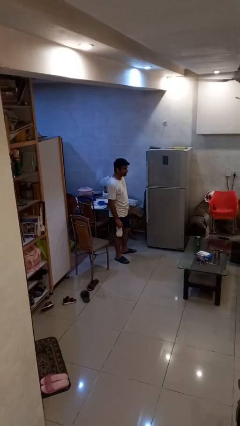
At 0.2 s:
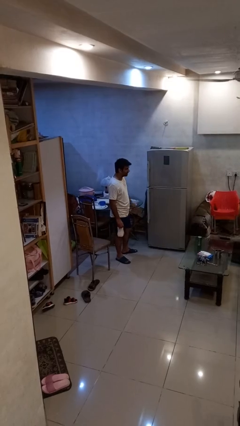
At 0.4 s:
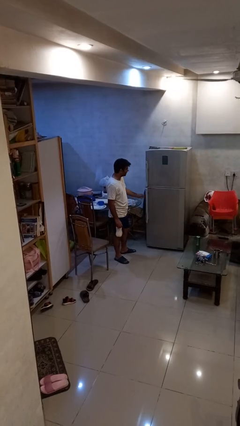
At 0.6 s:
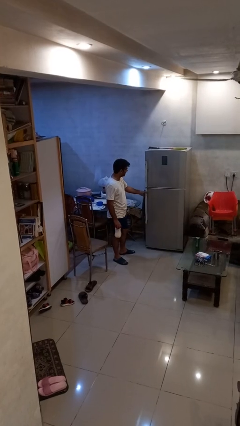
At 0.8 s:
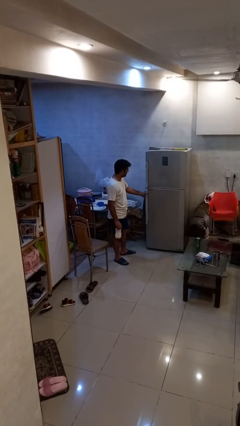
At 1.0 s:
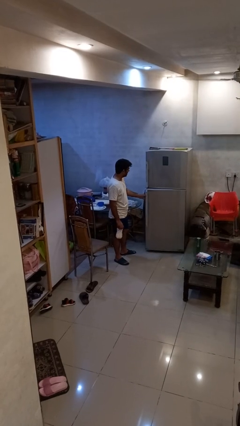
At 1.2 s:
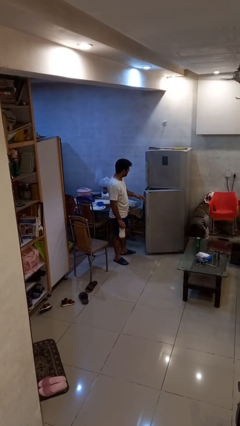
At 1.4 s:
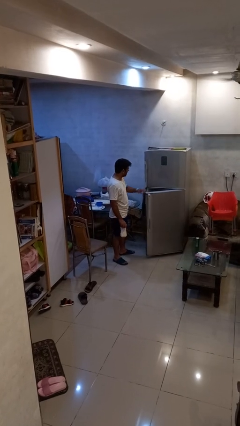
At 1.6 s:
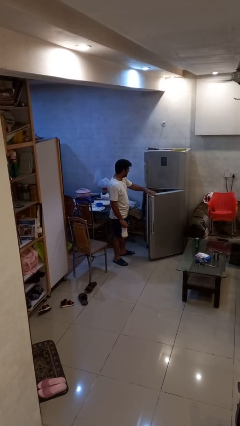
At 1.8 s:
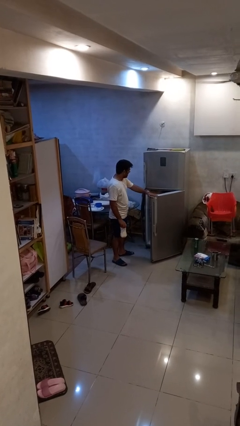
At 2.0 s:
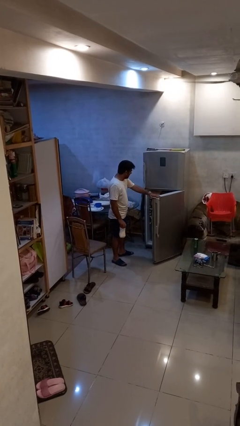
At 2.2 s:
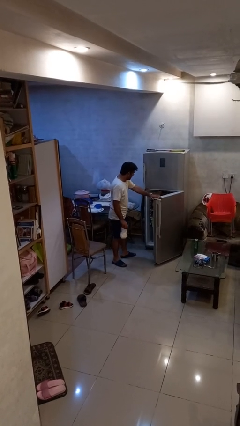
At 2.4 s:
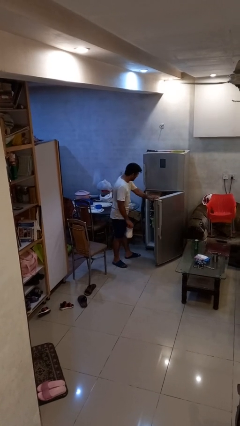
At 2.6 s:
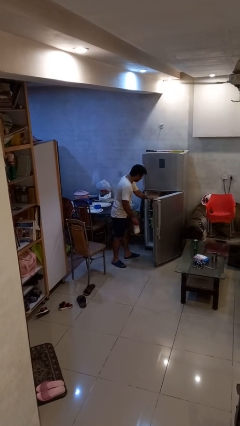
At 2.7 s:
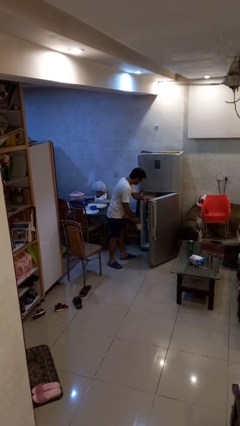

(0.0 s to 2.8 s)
person opens refrigerator

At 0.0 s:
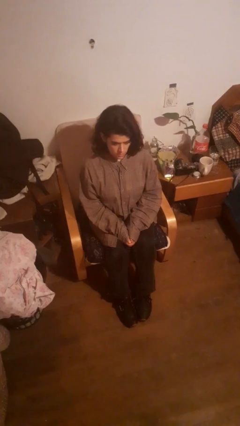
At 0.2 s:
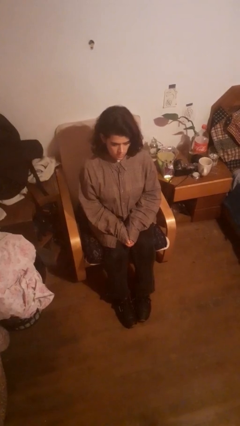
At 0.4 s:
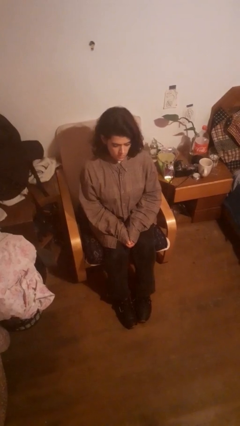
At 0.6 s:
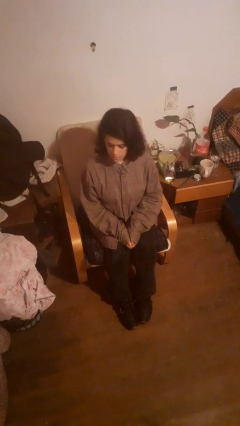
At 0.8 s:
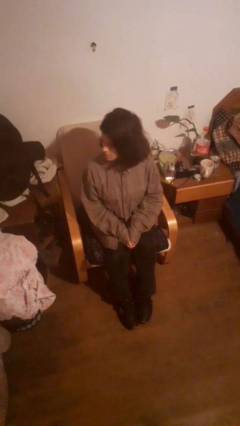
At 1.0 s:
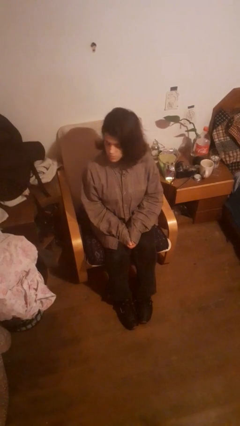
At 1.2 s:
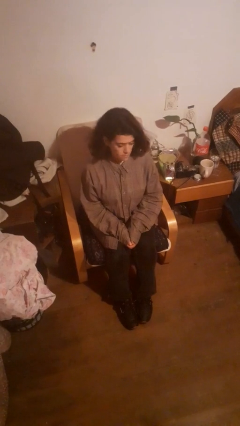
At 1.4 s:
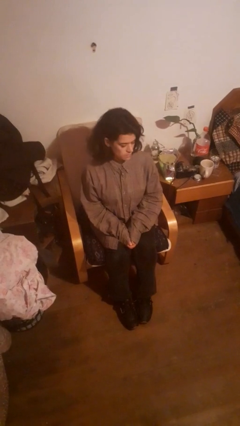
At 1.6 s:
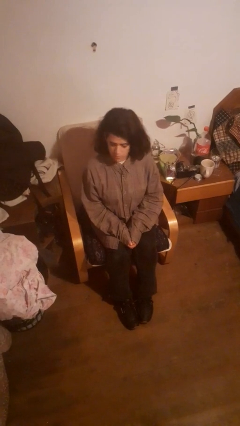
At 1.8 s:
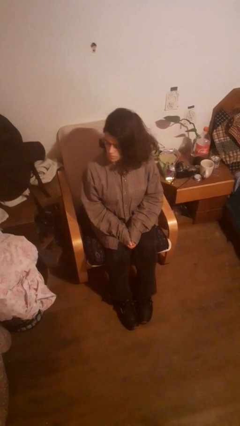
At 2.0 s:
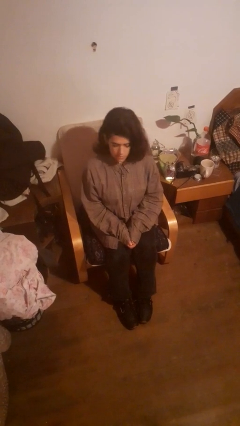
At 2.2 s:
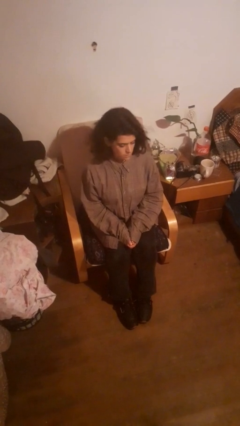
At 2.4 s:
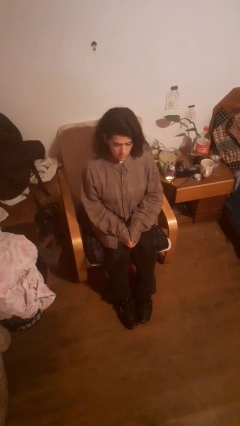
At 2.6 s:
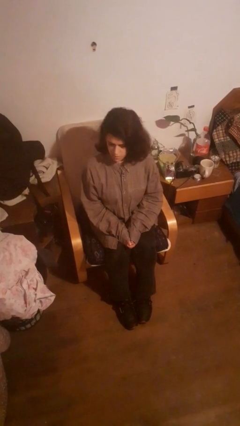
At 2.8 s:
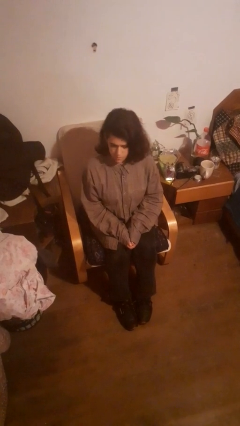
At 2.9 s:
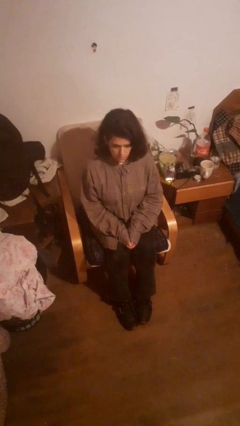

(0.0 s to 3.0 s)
person shakes head

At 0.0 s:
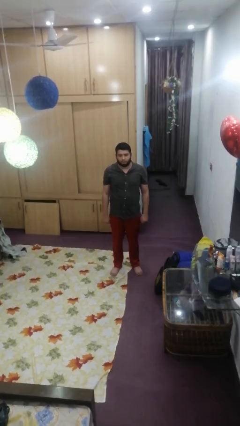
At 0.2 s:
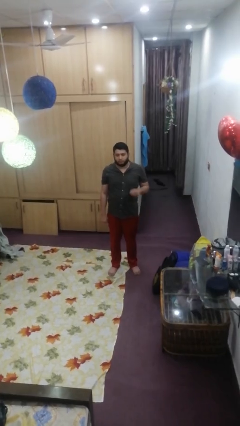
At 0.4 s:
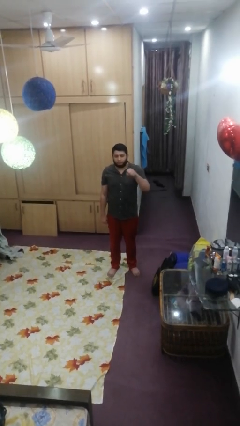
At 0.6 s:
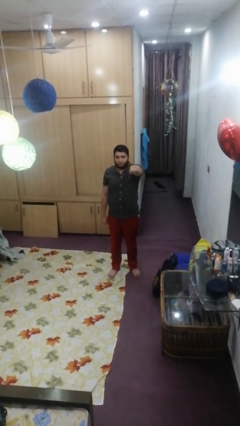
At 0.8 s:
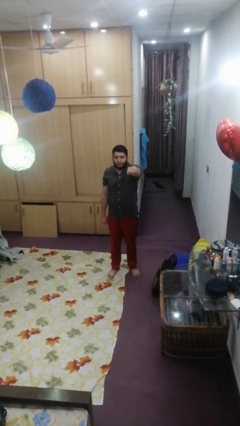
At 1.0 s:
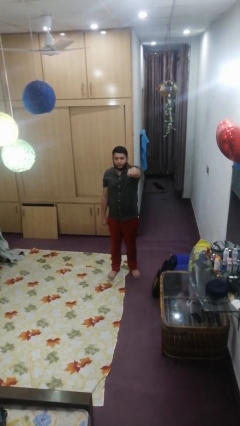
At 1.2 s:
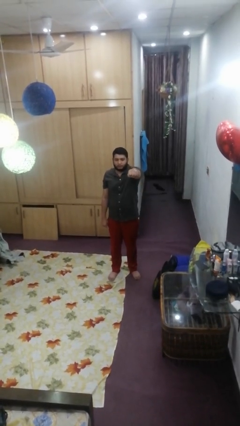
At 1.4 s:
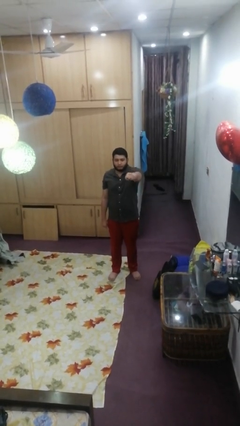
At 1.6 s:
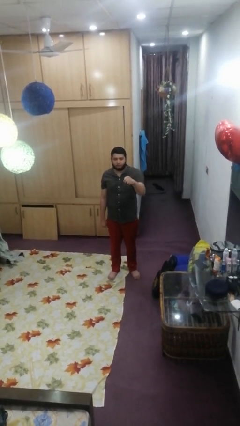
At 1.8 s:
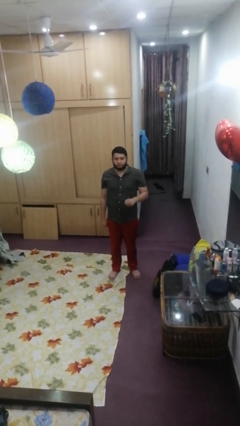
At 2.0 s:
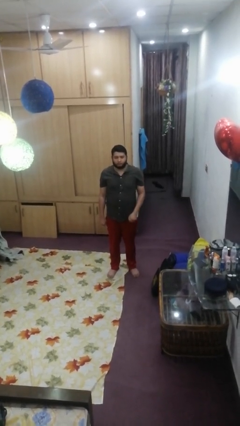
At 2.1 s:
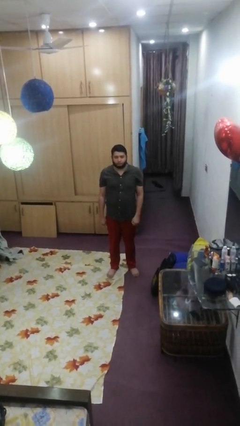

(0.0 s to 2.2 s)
person punches

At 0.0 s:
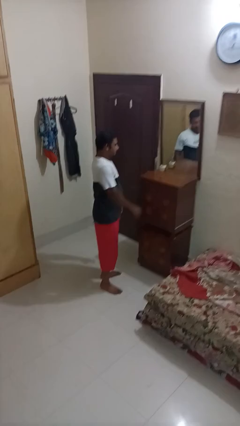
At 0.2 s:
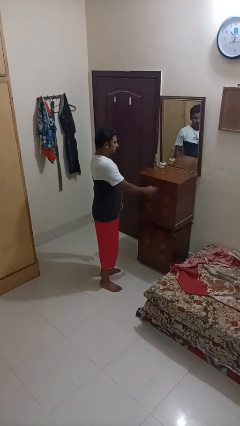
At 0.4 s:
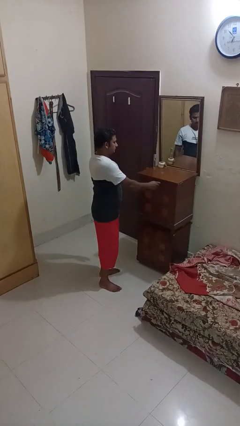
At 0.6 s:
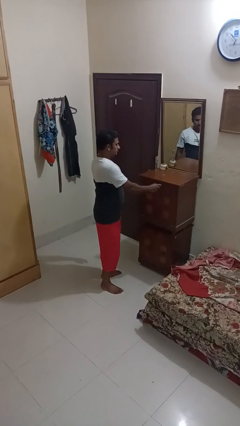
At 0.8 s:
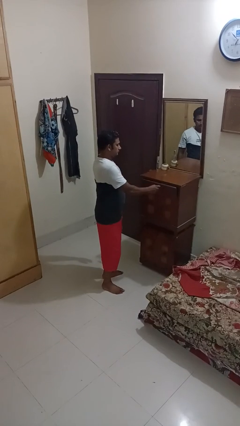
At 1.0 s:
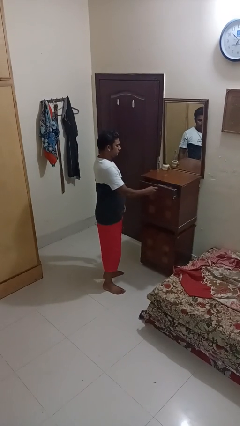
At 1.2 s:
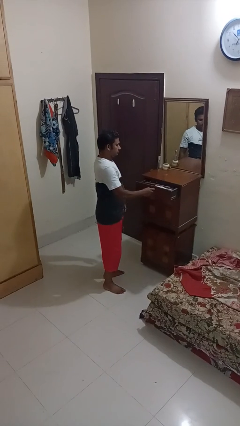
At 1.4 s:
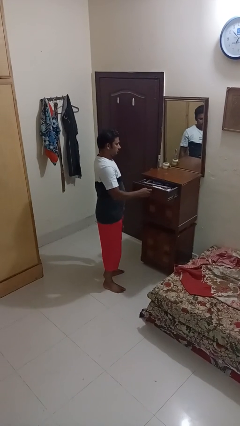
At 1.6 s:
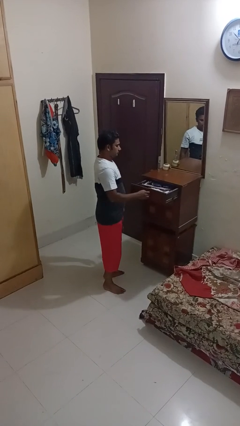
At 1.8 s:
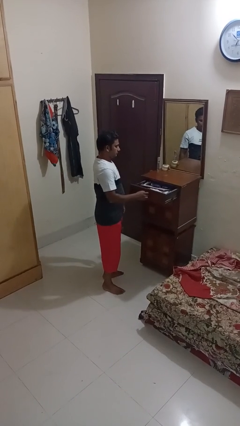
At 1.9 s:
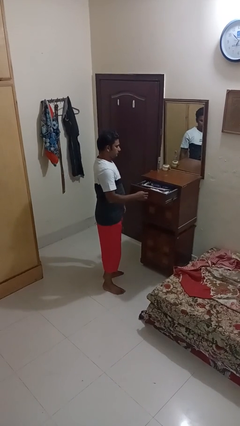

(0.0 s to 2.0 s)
person opens dresser drawer

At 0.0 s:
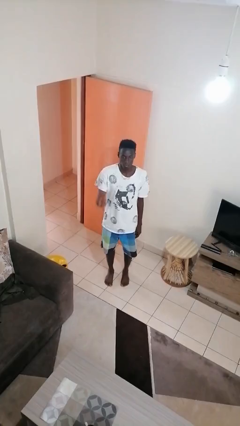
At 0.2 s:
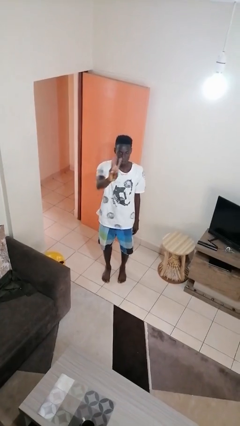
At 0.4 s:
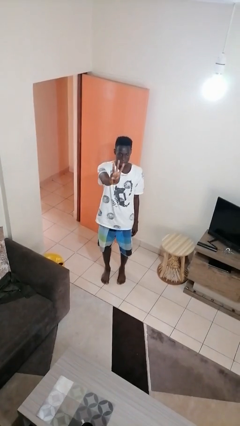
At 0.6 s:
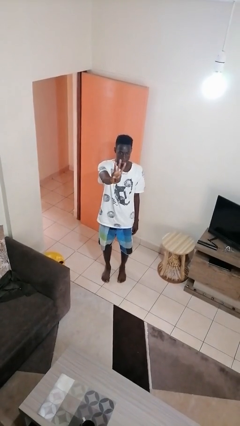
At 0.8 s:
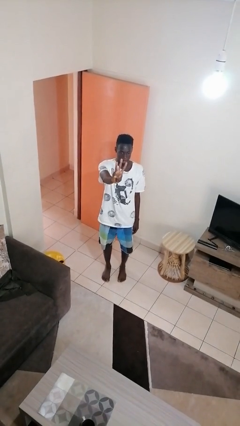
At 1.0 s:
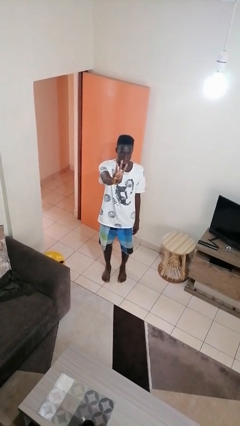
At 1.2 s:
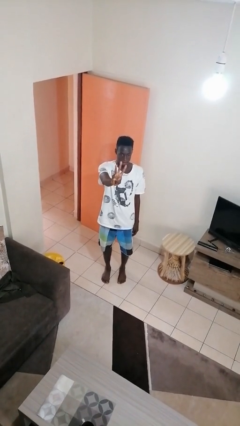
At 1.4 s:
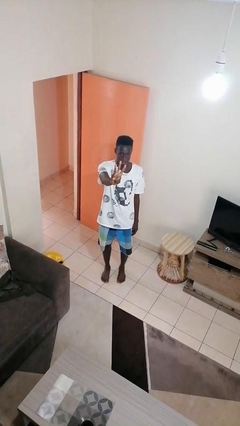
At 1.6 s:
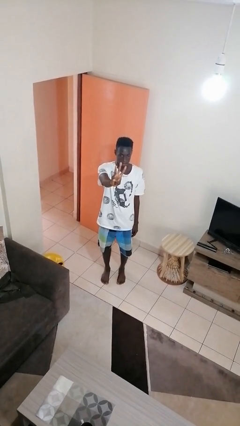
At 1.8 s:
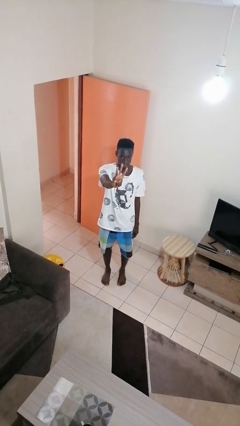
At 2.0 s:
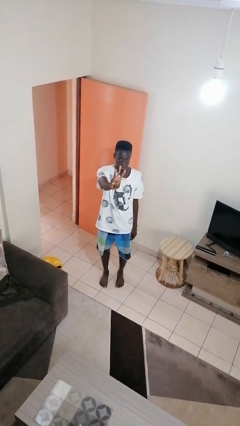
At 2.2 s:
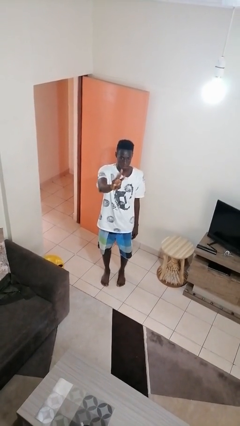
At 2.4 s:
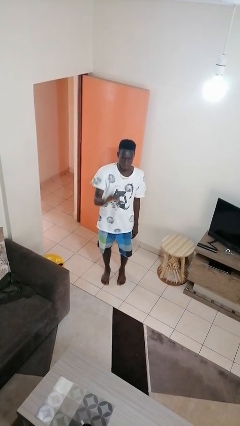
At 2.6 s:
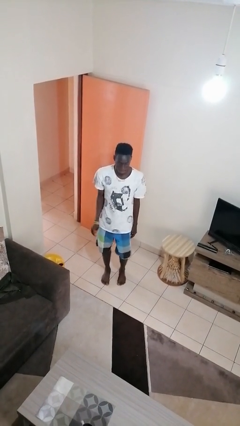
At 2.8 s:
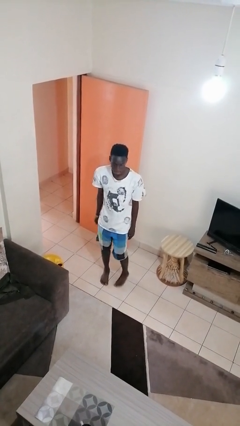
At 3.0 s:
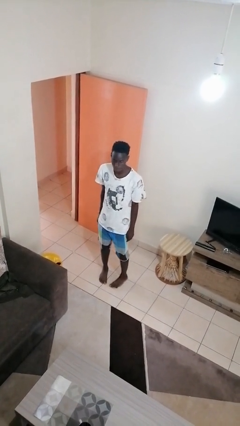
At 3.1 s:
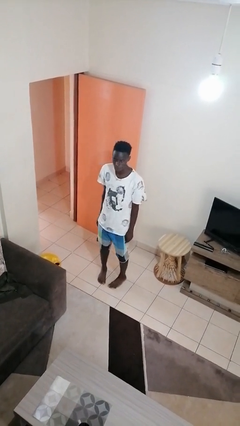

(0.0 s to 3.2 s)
person gestures number three

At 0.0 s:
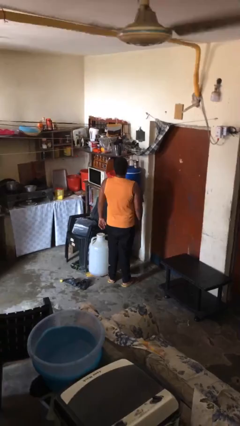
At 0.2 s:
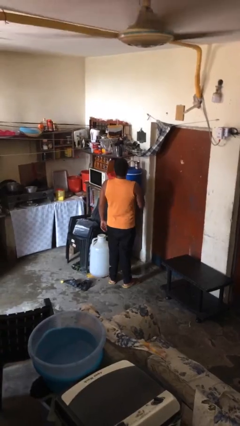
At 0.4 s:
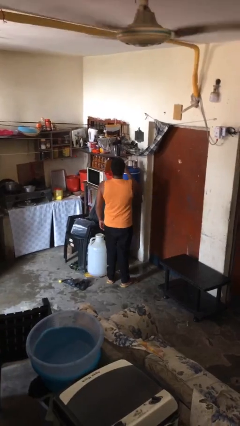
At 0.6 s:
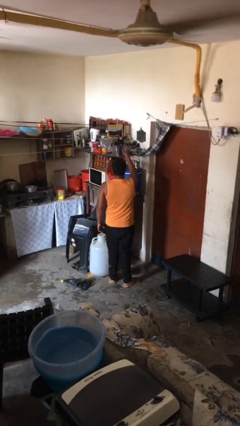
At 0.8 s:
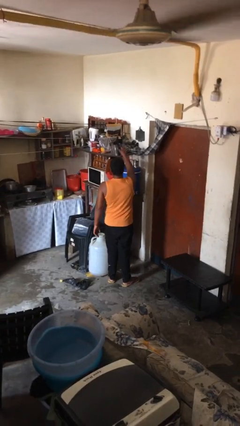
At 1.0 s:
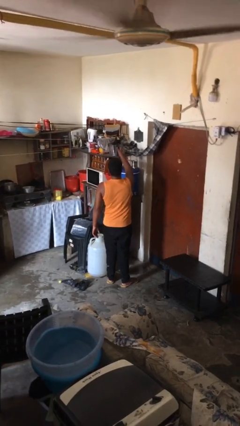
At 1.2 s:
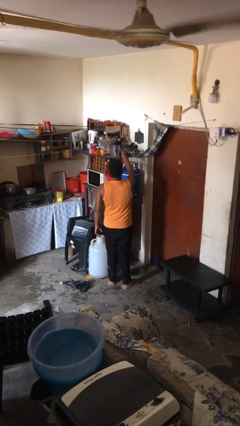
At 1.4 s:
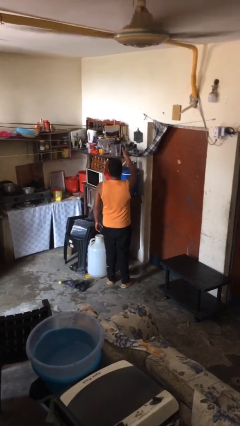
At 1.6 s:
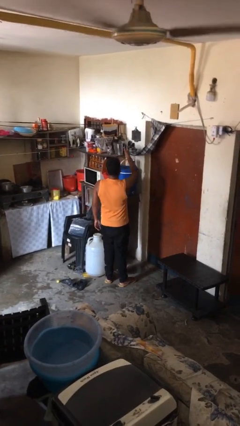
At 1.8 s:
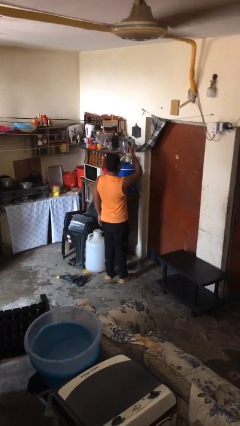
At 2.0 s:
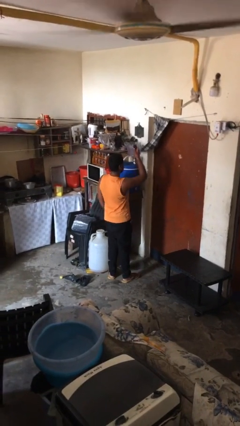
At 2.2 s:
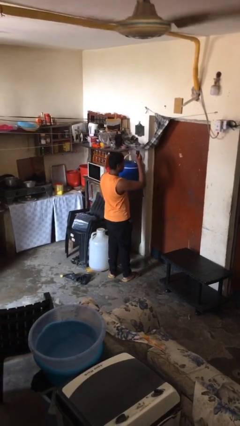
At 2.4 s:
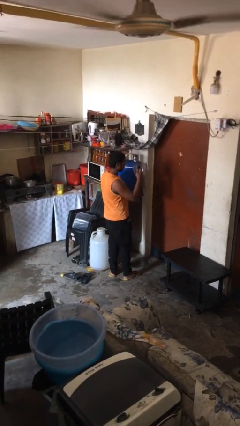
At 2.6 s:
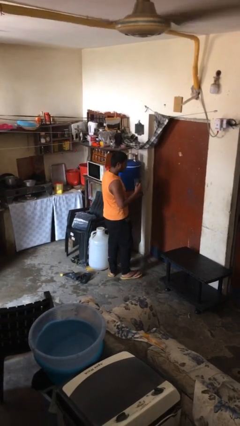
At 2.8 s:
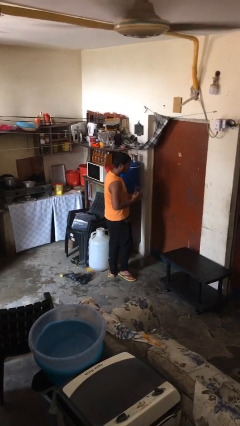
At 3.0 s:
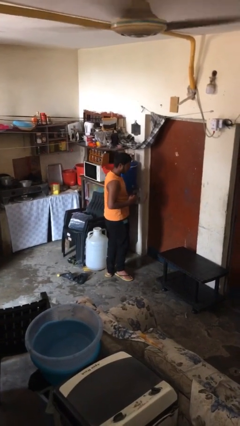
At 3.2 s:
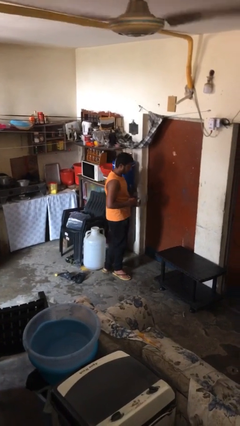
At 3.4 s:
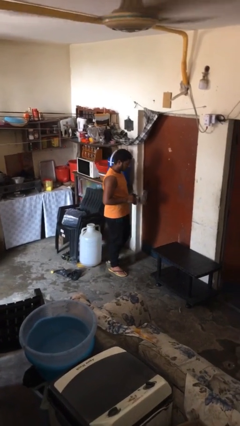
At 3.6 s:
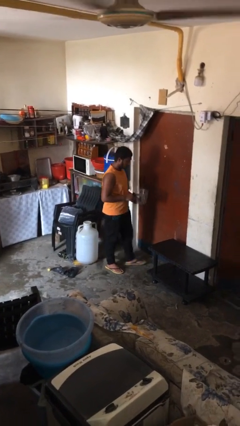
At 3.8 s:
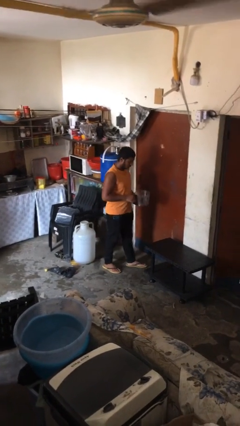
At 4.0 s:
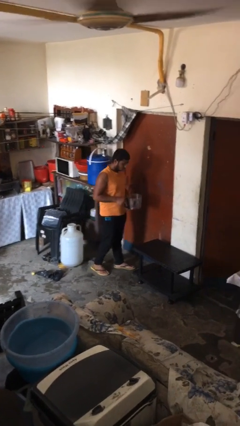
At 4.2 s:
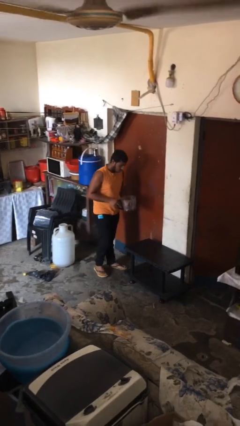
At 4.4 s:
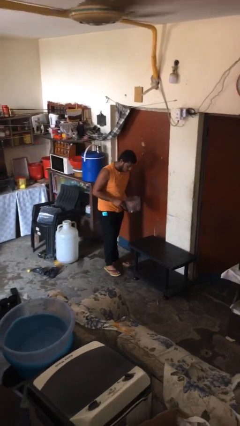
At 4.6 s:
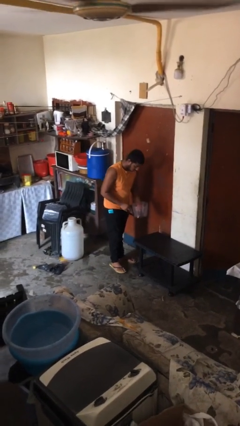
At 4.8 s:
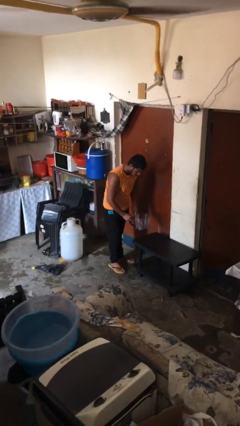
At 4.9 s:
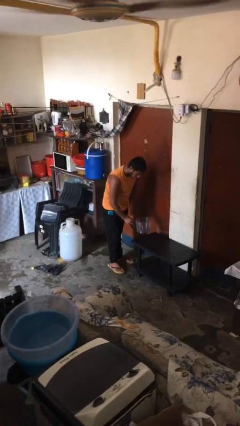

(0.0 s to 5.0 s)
person picks up object from shelf
